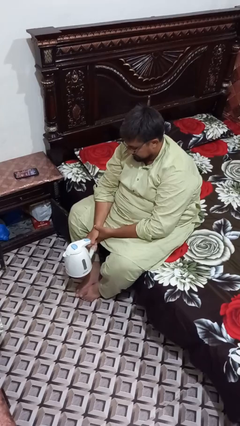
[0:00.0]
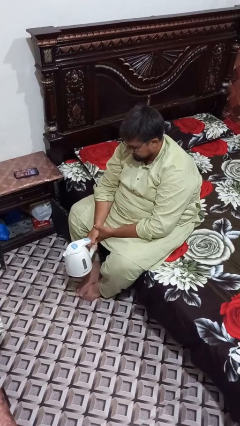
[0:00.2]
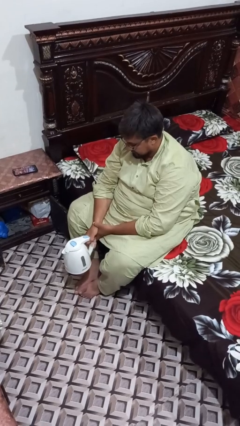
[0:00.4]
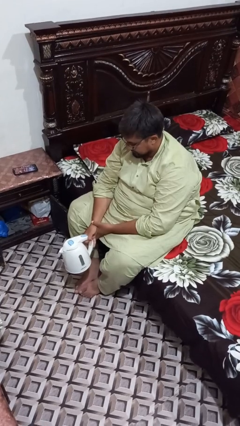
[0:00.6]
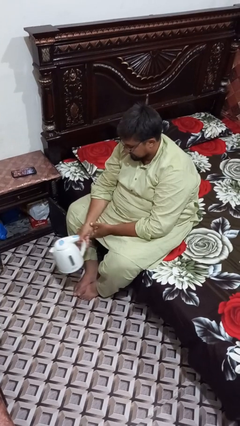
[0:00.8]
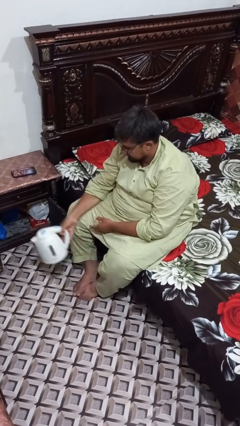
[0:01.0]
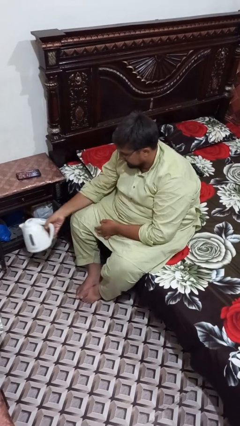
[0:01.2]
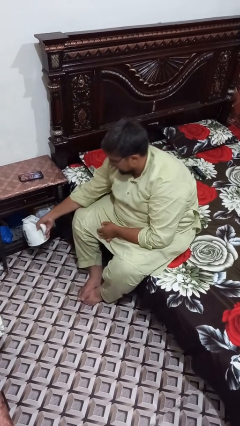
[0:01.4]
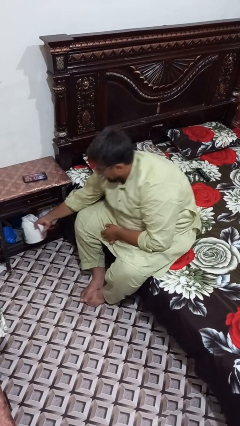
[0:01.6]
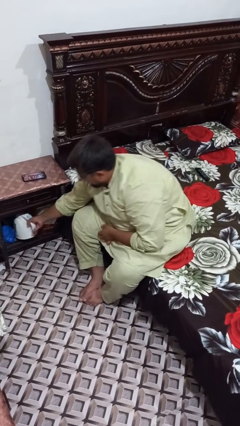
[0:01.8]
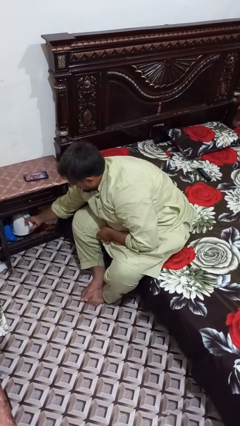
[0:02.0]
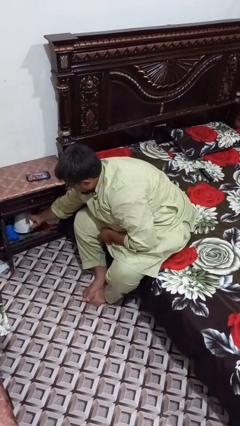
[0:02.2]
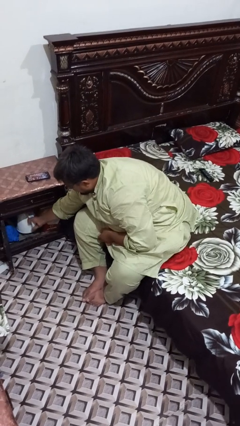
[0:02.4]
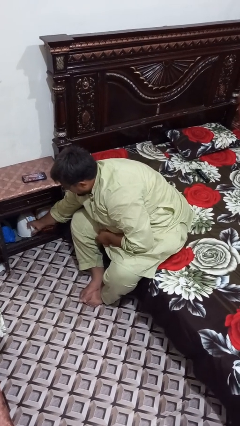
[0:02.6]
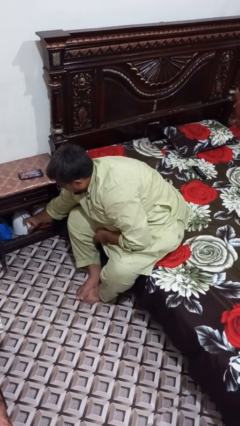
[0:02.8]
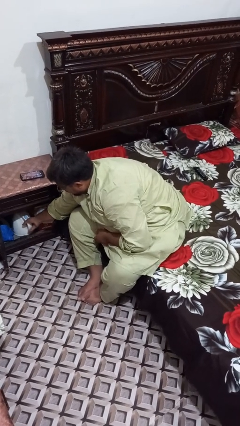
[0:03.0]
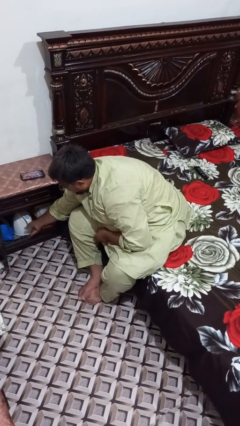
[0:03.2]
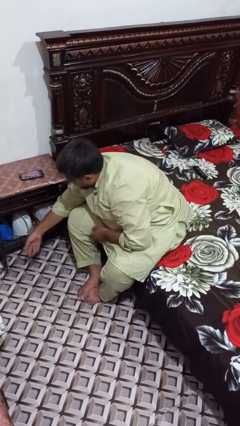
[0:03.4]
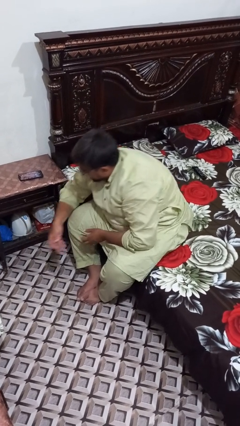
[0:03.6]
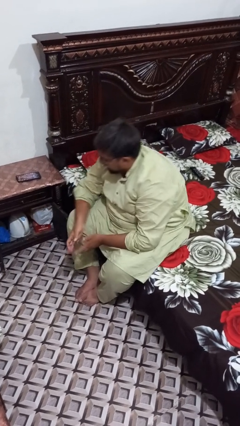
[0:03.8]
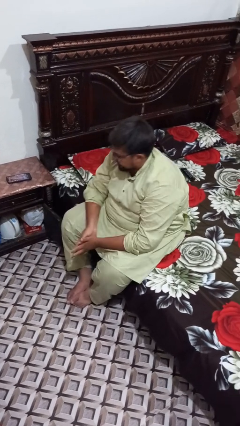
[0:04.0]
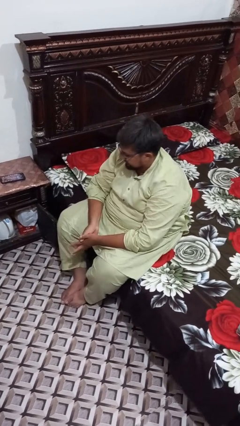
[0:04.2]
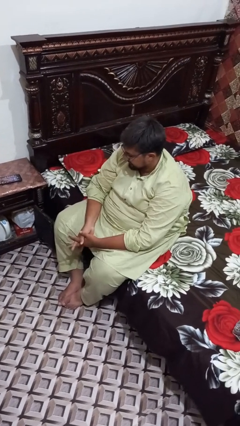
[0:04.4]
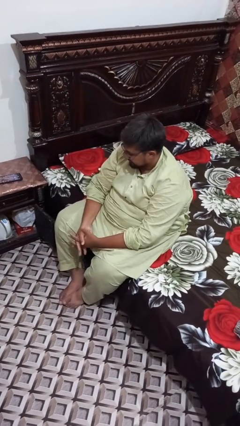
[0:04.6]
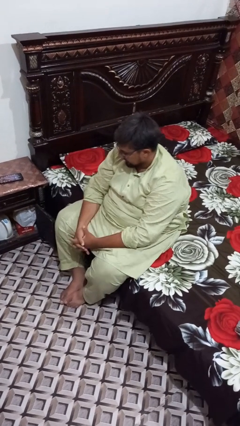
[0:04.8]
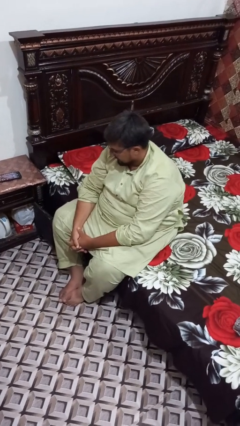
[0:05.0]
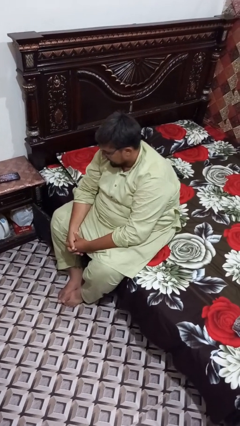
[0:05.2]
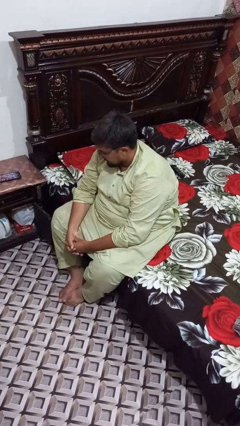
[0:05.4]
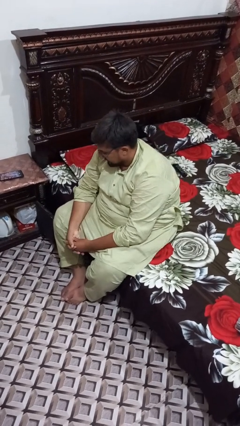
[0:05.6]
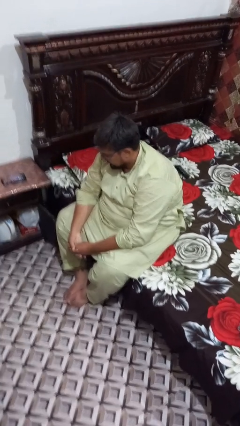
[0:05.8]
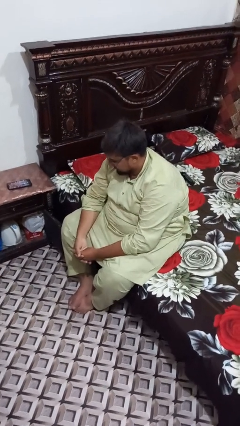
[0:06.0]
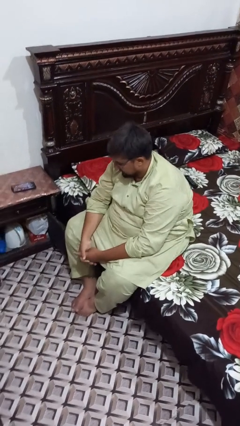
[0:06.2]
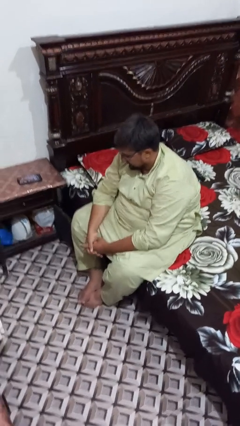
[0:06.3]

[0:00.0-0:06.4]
person puts down object into cabinet

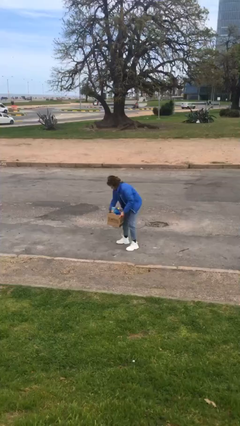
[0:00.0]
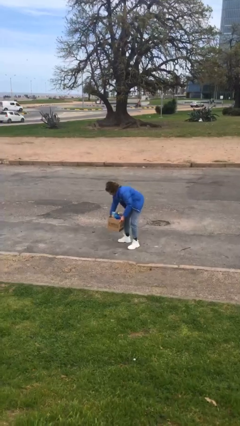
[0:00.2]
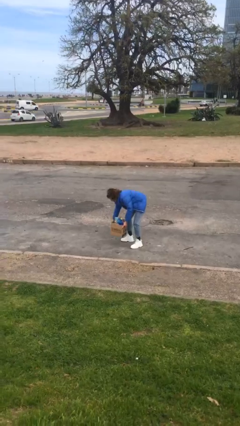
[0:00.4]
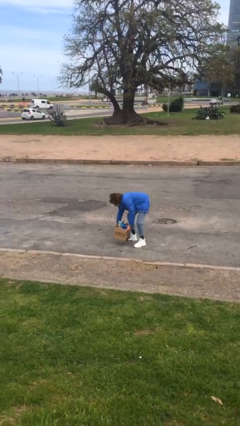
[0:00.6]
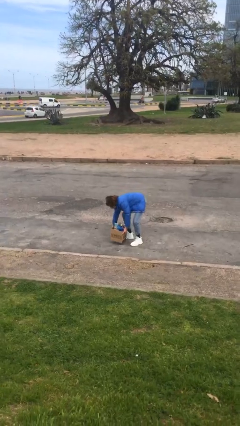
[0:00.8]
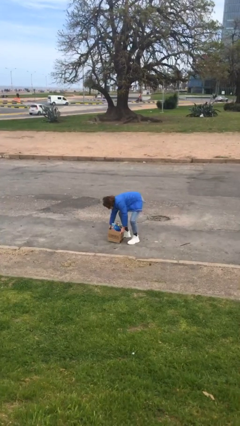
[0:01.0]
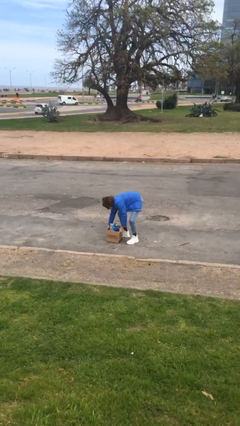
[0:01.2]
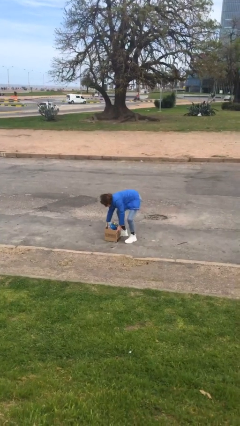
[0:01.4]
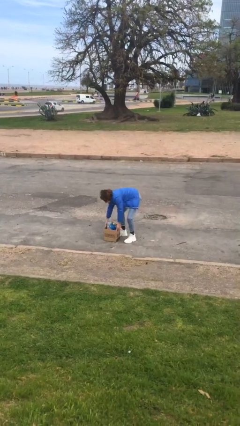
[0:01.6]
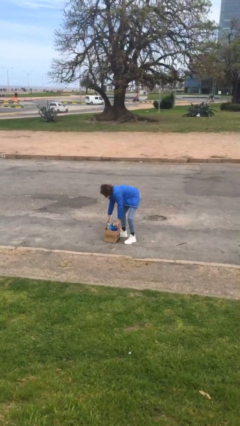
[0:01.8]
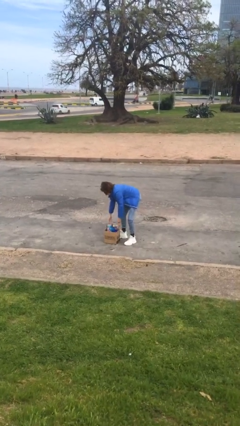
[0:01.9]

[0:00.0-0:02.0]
person puts down object on floor

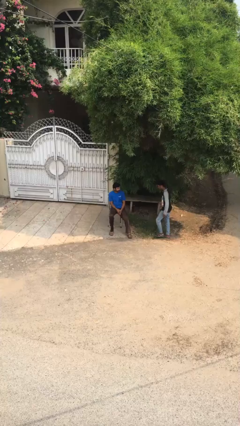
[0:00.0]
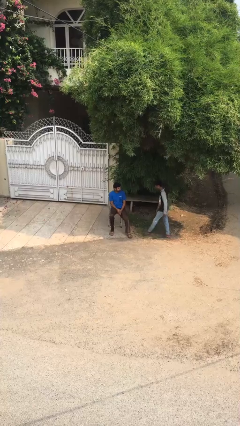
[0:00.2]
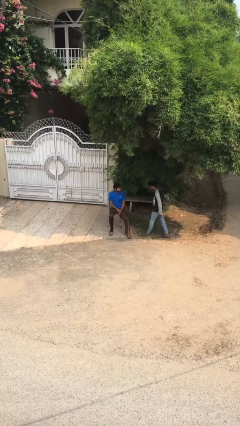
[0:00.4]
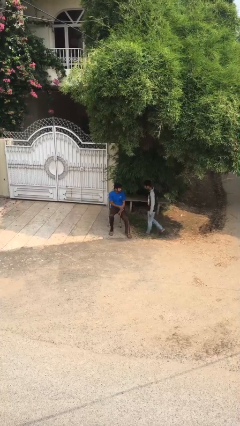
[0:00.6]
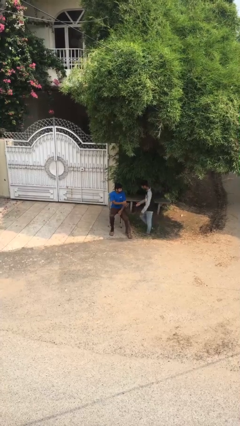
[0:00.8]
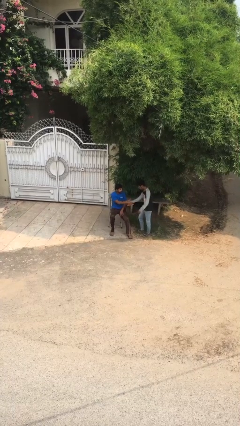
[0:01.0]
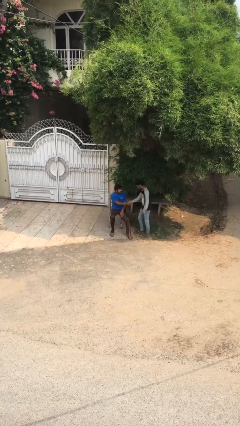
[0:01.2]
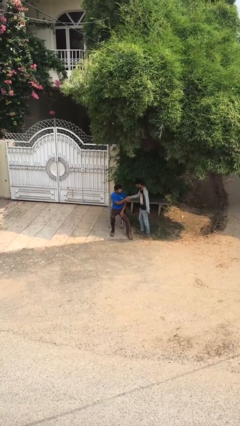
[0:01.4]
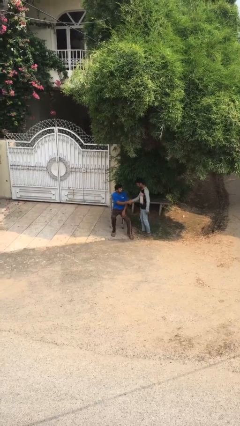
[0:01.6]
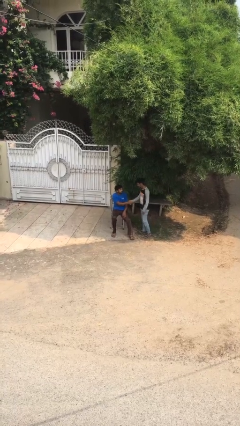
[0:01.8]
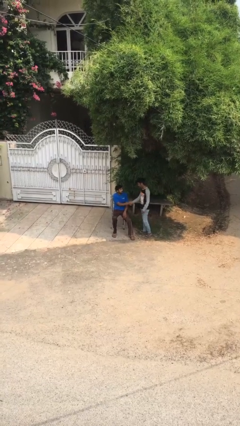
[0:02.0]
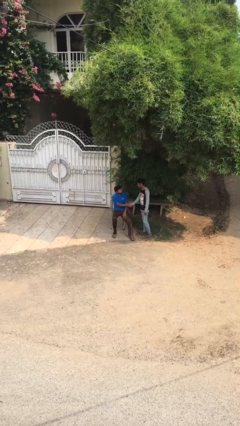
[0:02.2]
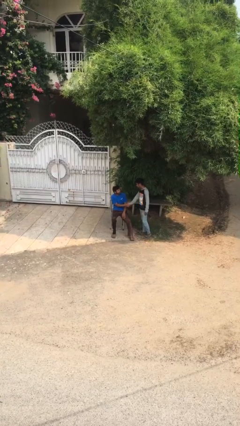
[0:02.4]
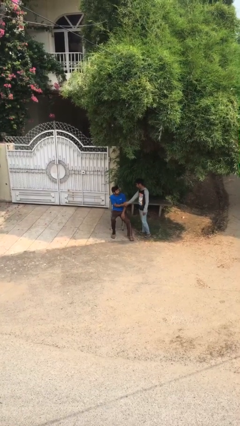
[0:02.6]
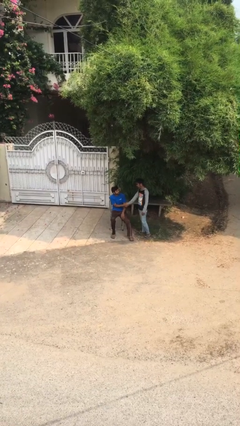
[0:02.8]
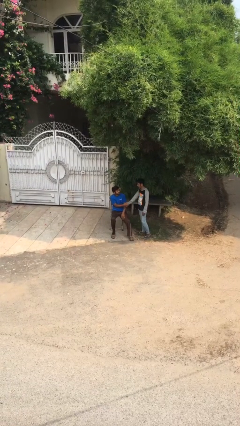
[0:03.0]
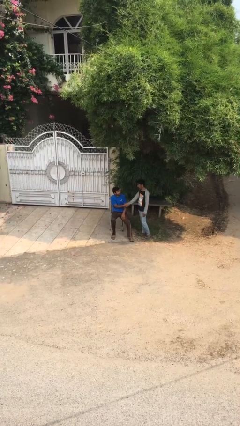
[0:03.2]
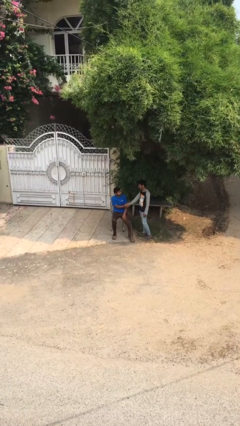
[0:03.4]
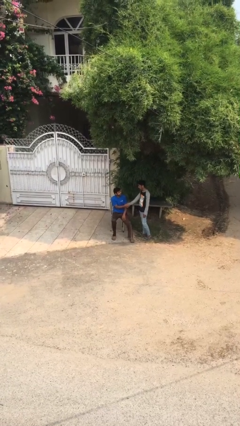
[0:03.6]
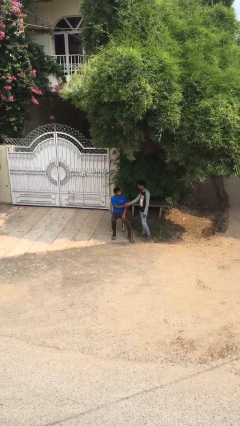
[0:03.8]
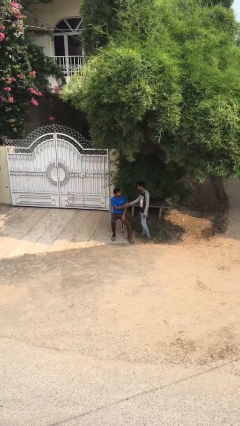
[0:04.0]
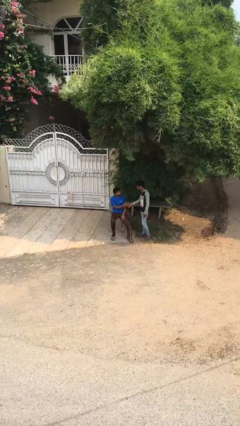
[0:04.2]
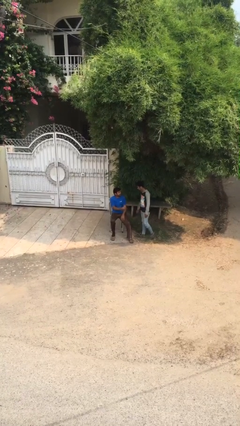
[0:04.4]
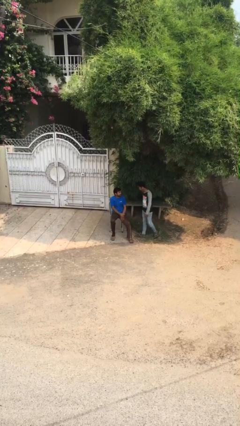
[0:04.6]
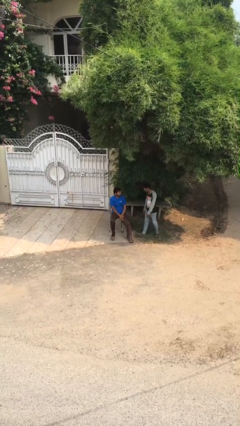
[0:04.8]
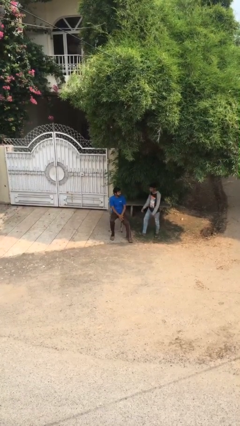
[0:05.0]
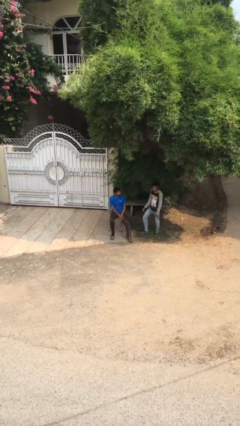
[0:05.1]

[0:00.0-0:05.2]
person shakes hand

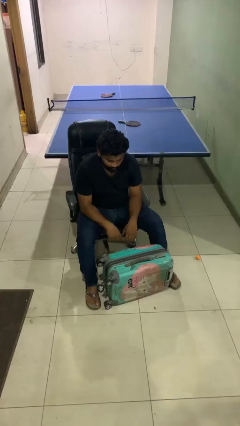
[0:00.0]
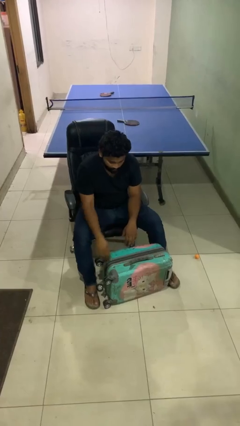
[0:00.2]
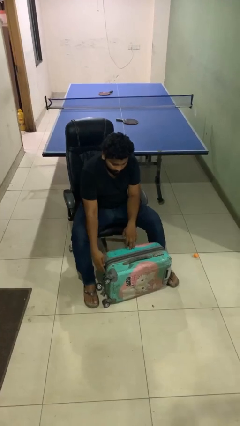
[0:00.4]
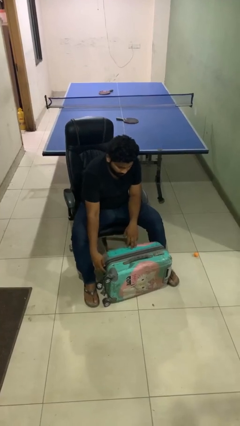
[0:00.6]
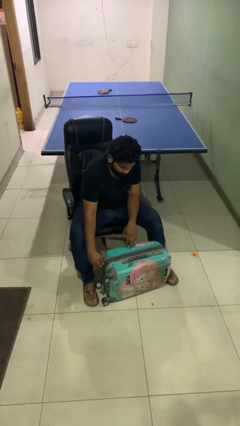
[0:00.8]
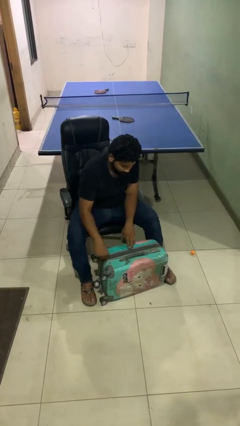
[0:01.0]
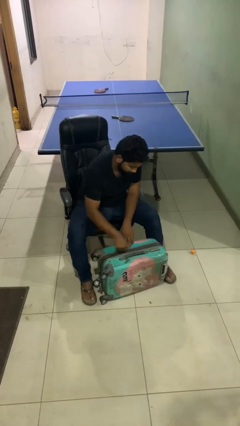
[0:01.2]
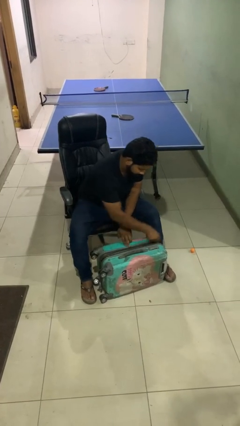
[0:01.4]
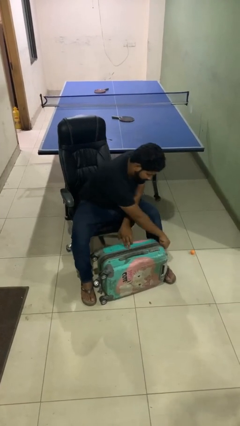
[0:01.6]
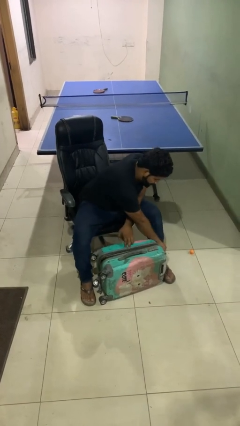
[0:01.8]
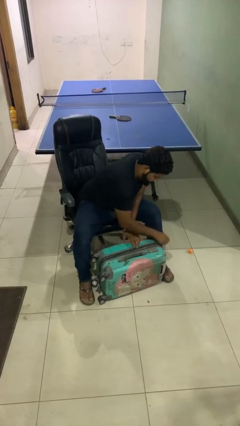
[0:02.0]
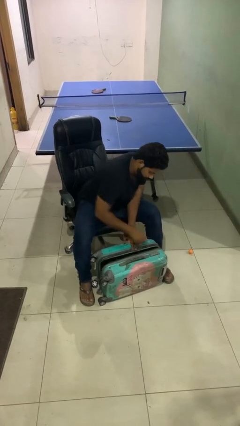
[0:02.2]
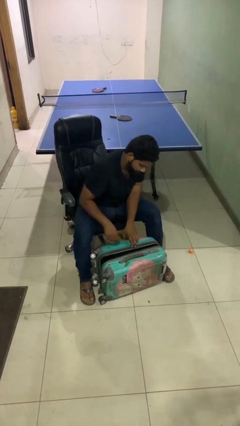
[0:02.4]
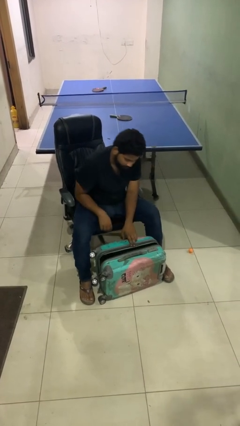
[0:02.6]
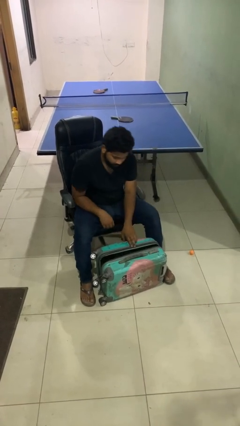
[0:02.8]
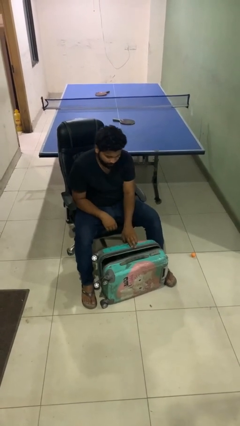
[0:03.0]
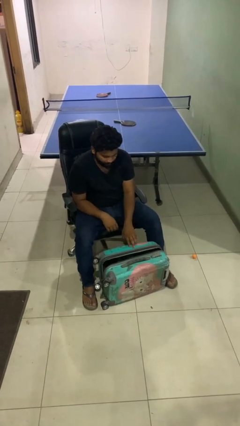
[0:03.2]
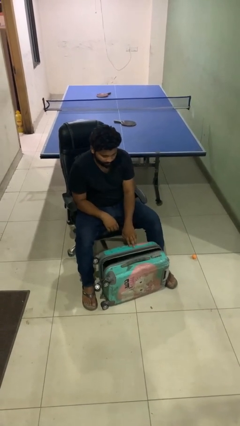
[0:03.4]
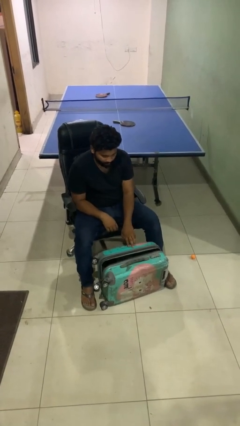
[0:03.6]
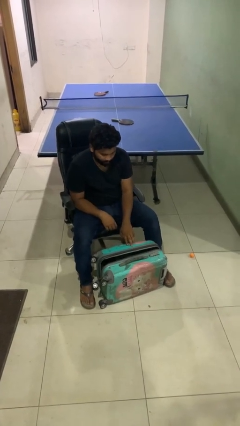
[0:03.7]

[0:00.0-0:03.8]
person opens suitcase

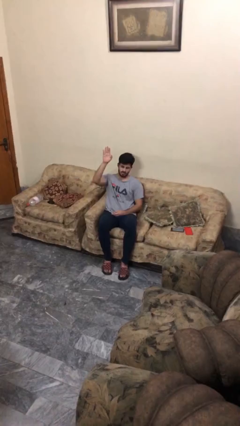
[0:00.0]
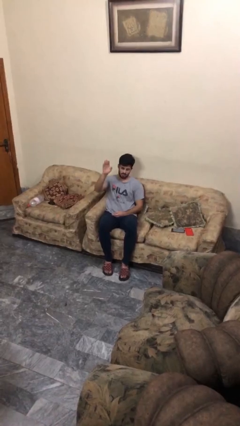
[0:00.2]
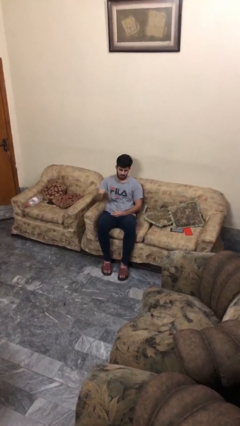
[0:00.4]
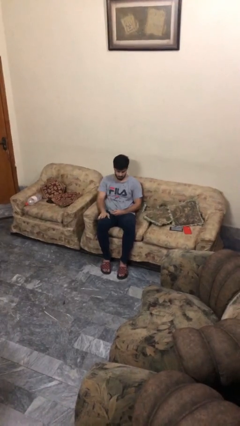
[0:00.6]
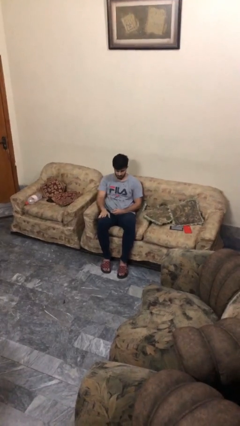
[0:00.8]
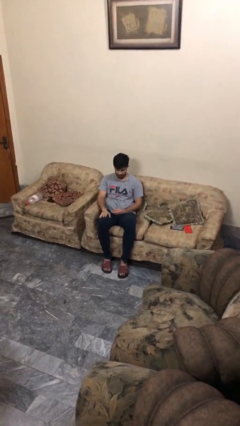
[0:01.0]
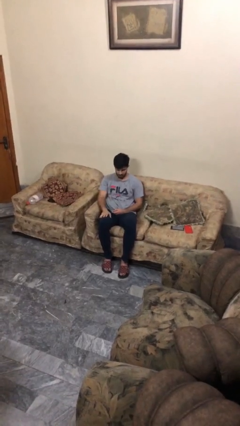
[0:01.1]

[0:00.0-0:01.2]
person gestures lower hand
